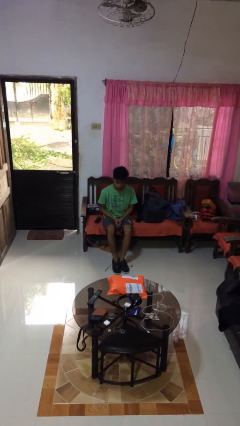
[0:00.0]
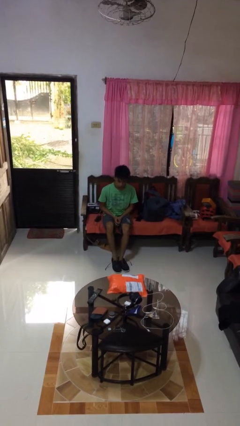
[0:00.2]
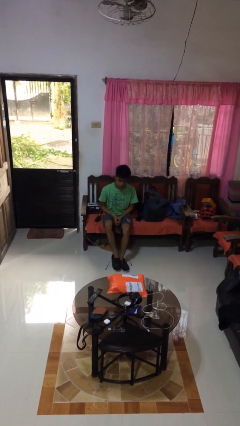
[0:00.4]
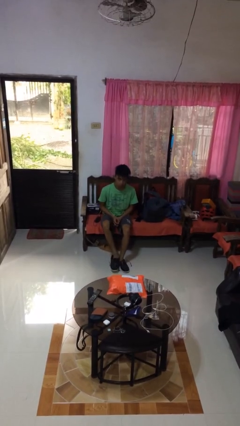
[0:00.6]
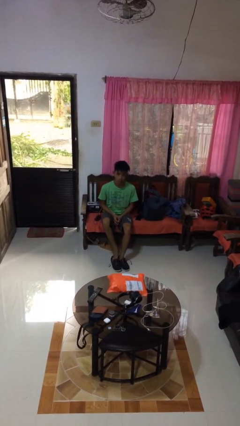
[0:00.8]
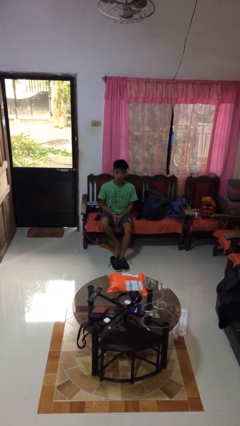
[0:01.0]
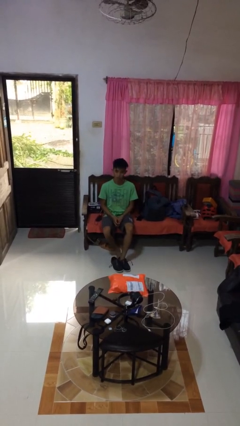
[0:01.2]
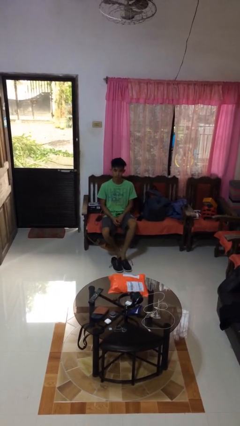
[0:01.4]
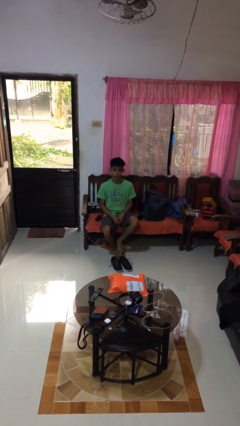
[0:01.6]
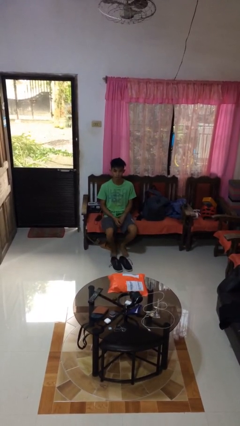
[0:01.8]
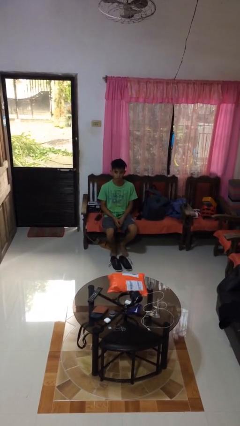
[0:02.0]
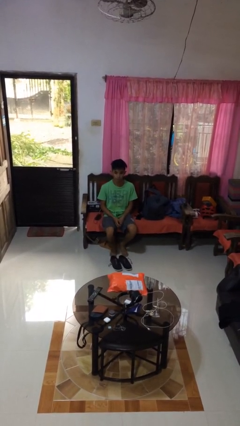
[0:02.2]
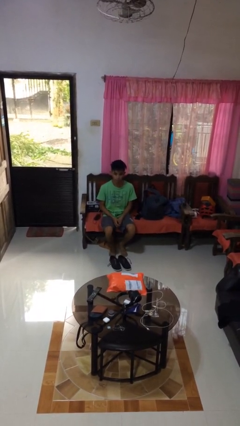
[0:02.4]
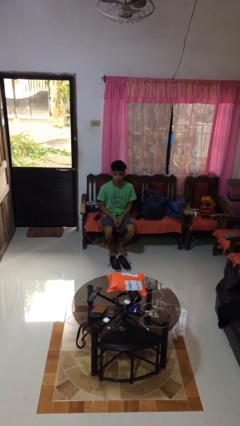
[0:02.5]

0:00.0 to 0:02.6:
person takes off shoes

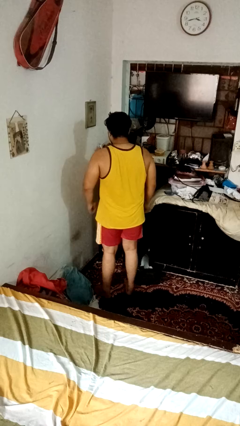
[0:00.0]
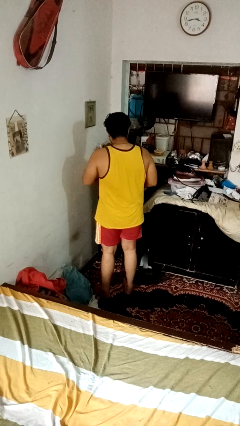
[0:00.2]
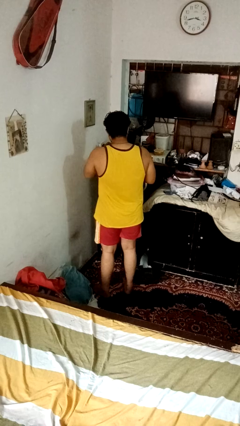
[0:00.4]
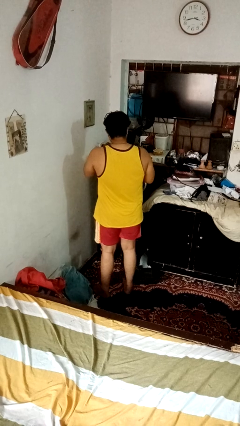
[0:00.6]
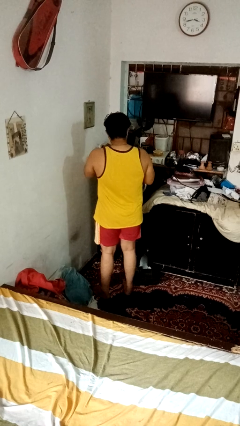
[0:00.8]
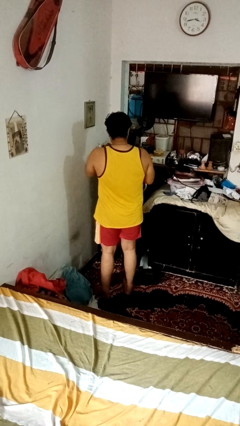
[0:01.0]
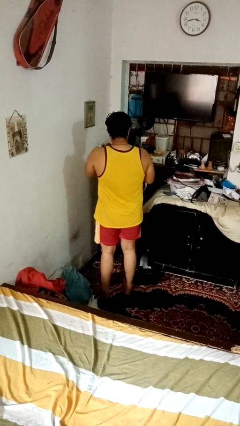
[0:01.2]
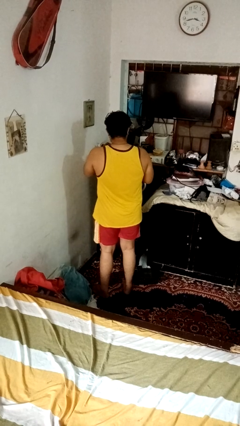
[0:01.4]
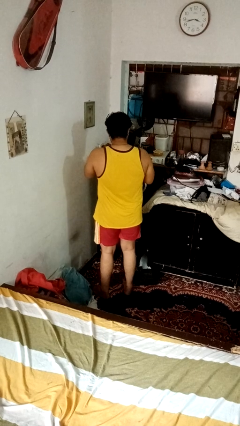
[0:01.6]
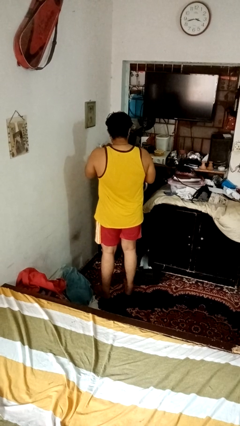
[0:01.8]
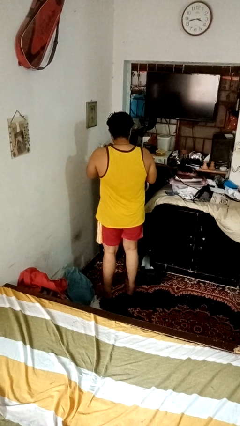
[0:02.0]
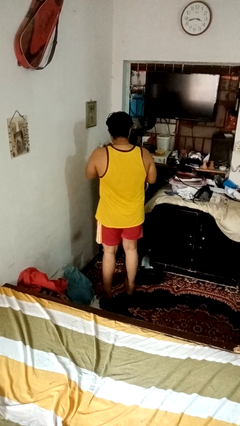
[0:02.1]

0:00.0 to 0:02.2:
person files fingernails

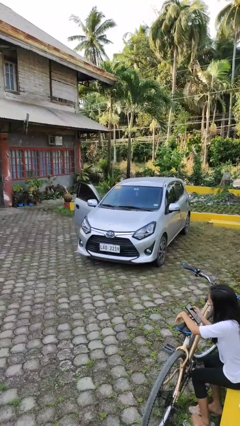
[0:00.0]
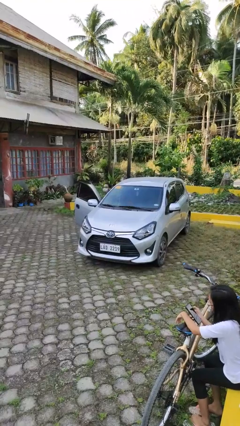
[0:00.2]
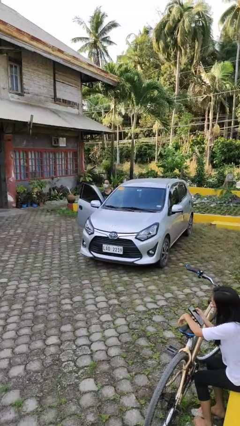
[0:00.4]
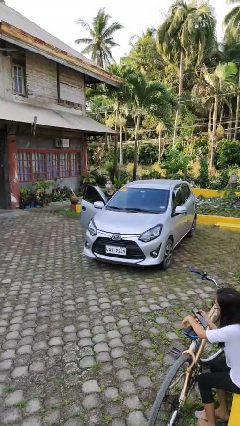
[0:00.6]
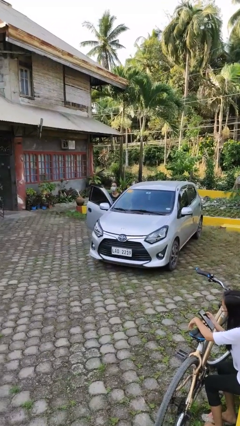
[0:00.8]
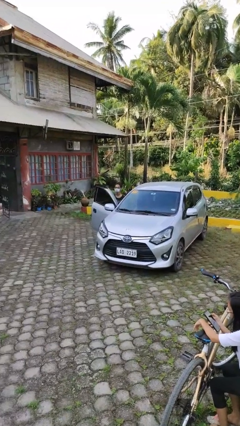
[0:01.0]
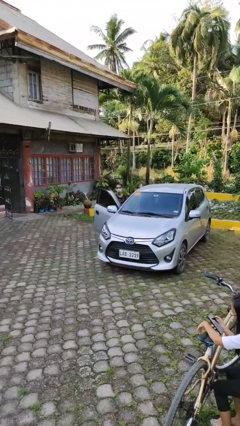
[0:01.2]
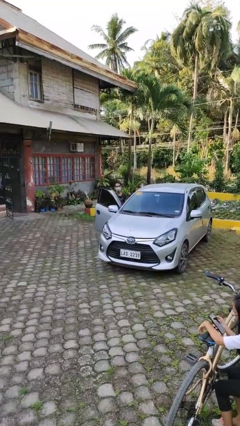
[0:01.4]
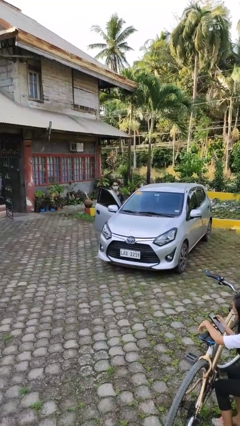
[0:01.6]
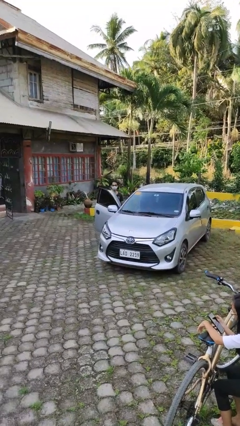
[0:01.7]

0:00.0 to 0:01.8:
person exits car

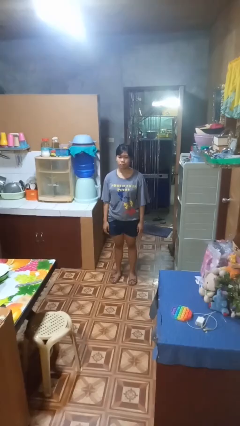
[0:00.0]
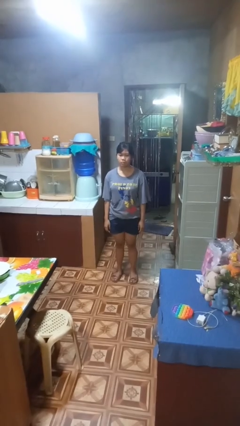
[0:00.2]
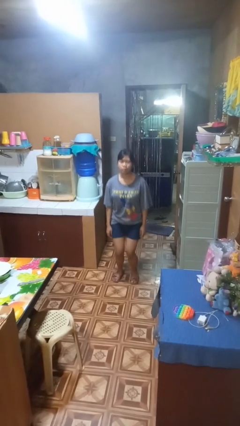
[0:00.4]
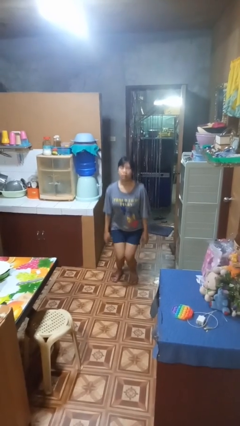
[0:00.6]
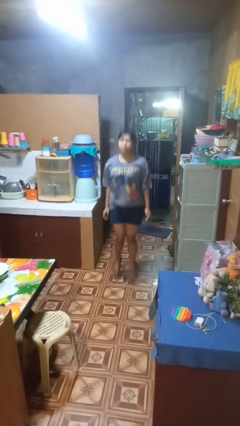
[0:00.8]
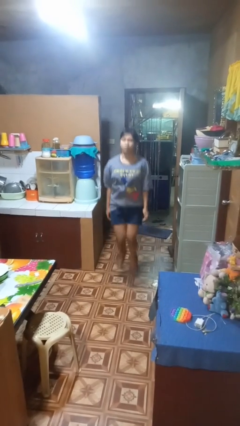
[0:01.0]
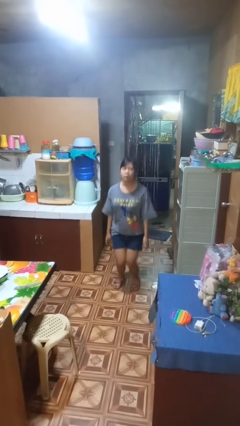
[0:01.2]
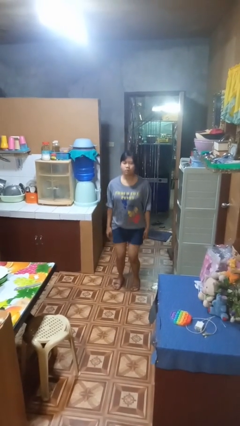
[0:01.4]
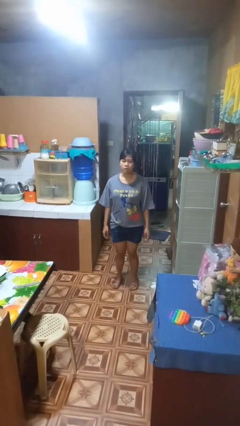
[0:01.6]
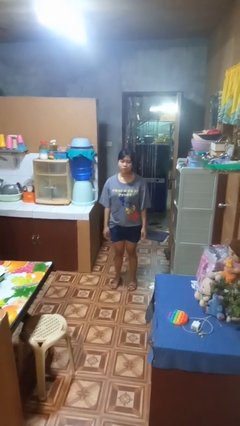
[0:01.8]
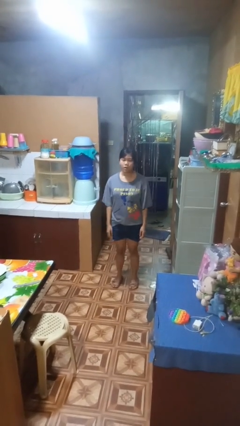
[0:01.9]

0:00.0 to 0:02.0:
person jumps

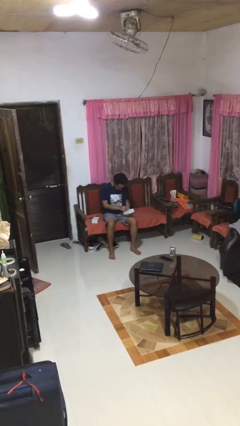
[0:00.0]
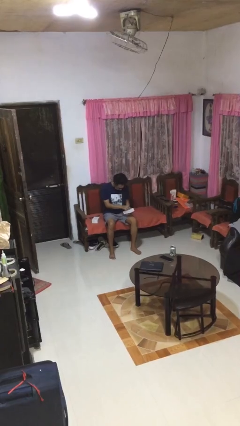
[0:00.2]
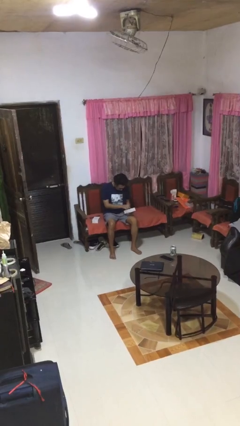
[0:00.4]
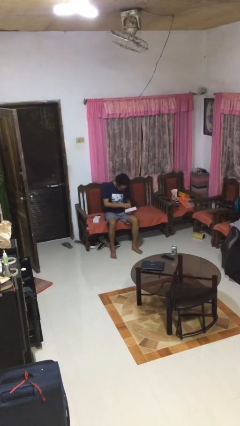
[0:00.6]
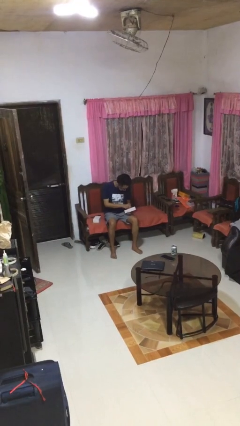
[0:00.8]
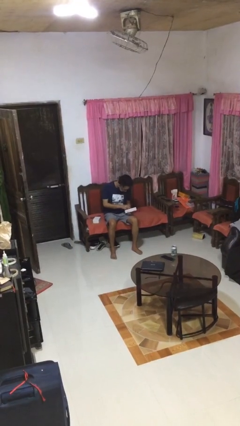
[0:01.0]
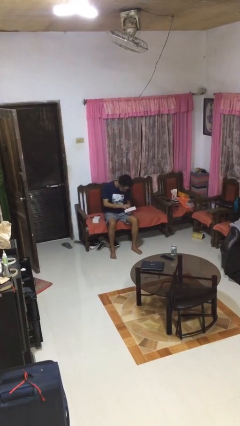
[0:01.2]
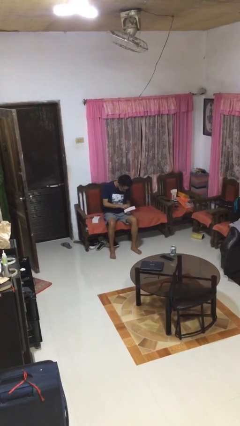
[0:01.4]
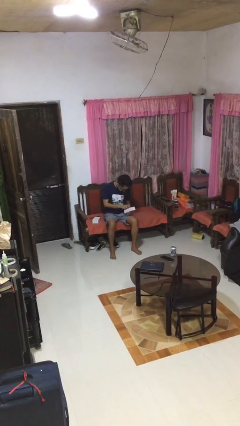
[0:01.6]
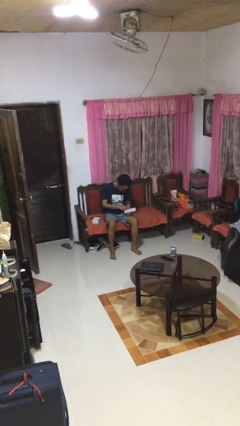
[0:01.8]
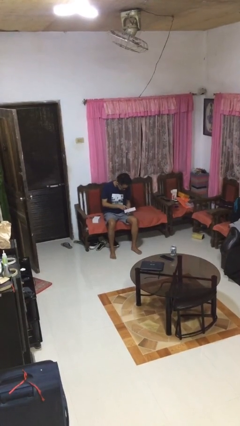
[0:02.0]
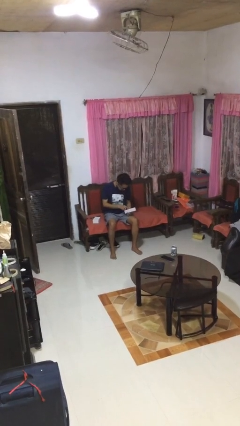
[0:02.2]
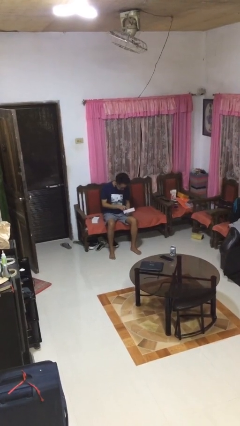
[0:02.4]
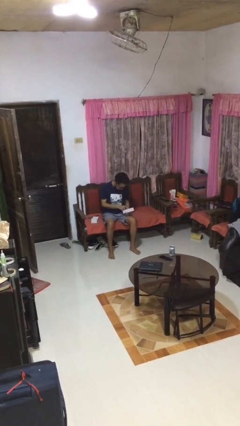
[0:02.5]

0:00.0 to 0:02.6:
person searches jewelry box

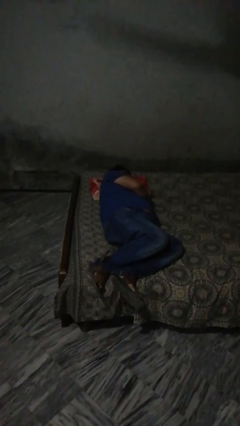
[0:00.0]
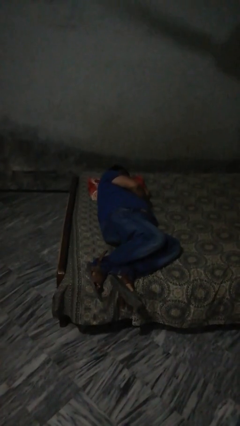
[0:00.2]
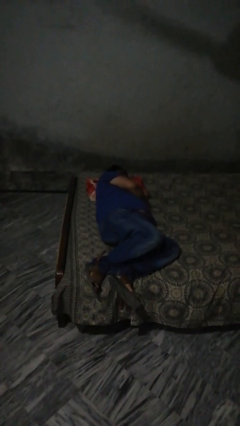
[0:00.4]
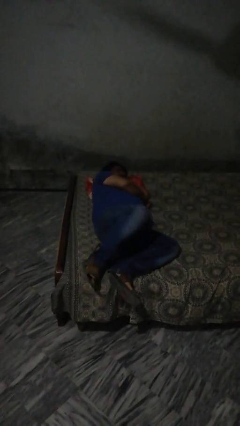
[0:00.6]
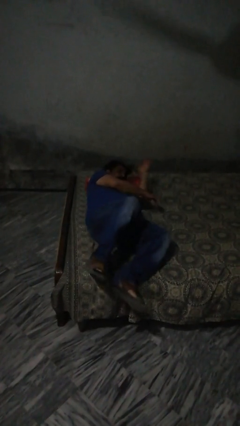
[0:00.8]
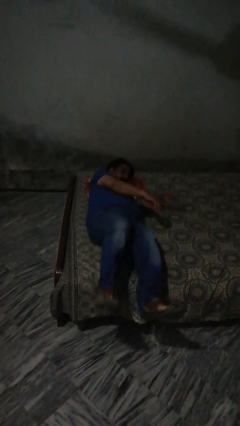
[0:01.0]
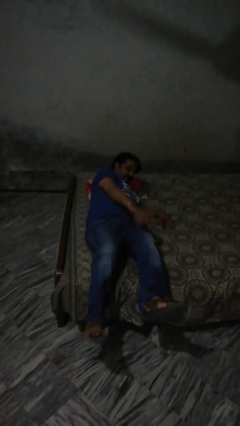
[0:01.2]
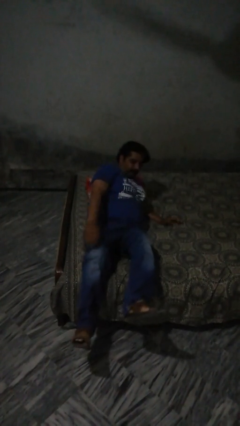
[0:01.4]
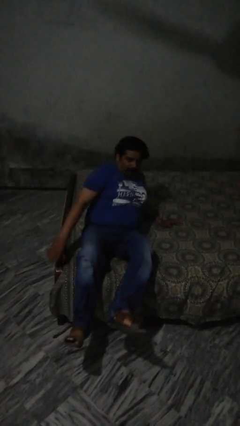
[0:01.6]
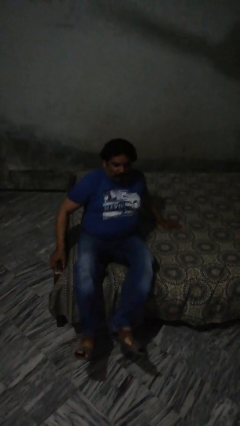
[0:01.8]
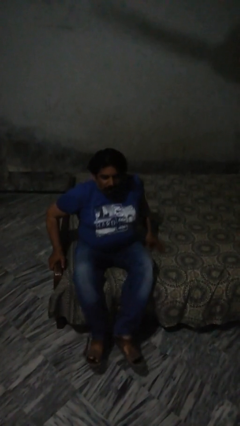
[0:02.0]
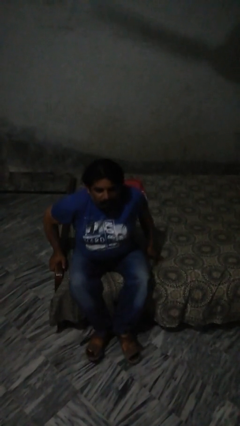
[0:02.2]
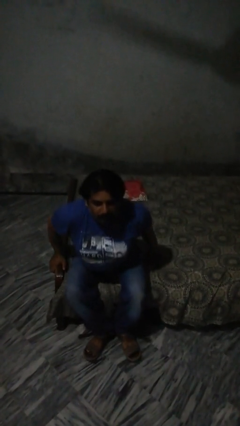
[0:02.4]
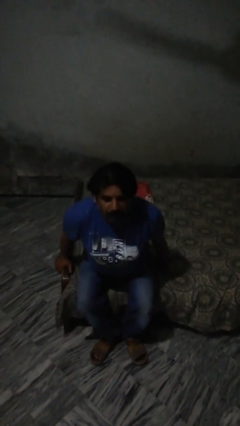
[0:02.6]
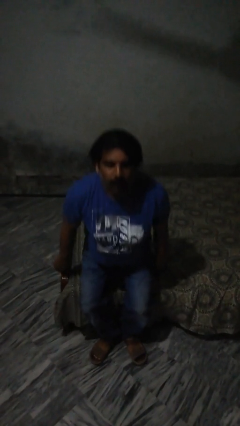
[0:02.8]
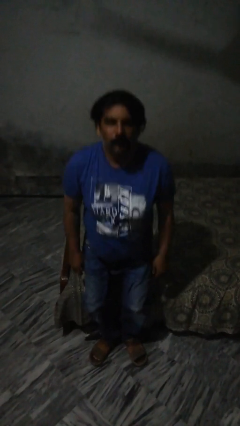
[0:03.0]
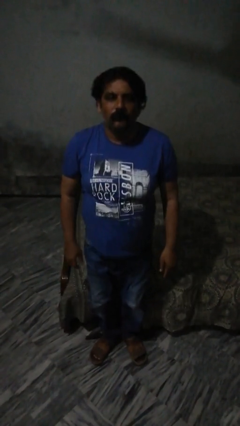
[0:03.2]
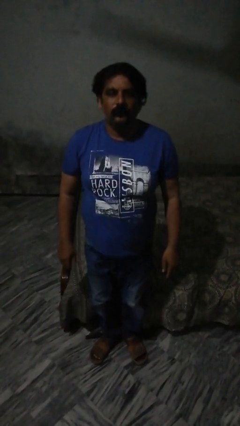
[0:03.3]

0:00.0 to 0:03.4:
person stands up

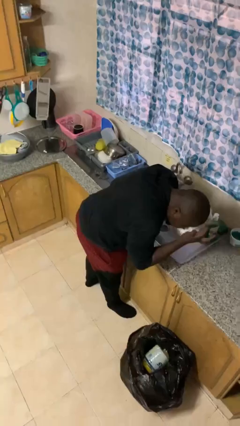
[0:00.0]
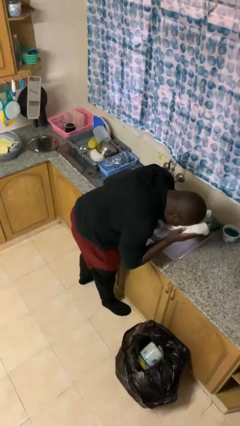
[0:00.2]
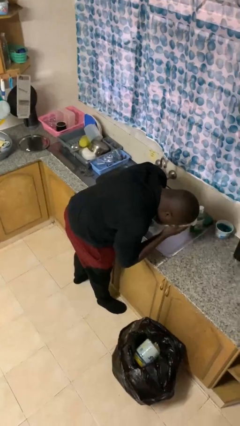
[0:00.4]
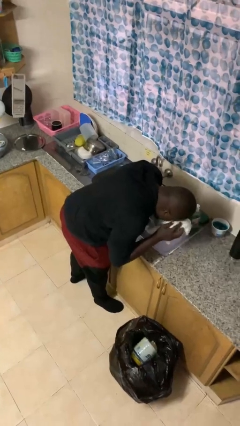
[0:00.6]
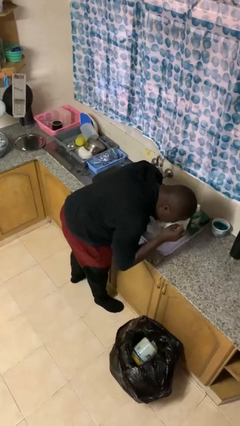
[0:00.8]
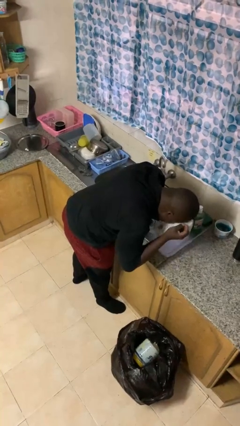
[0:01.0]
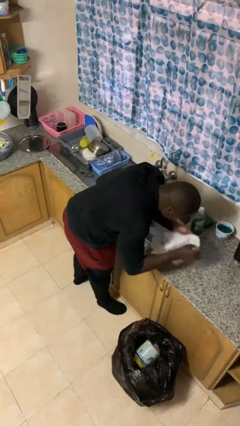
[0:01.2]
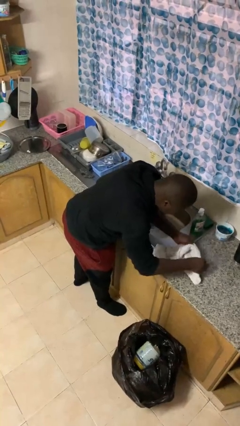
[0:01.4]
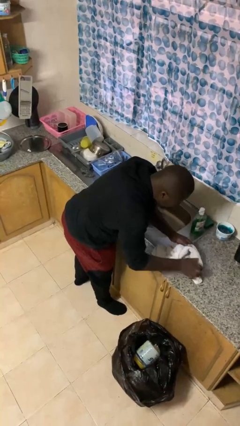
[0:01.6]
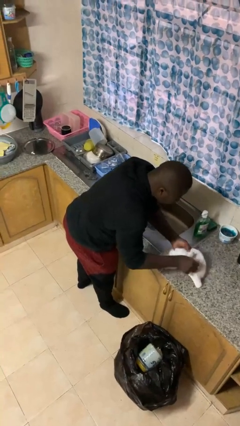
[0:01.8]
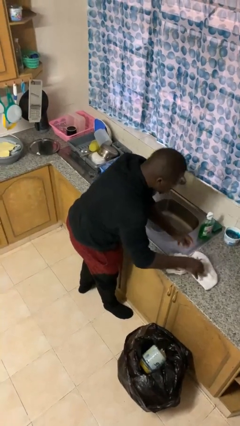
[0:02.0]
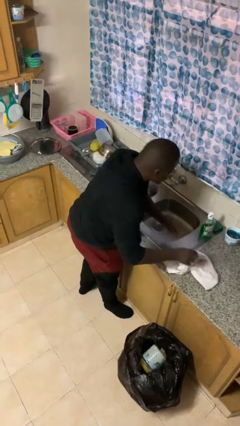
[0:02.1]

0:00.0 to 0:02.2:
person dries face with towel
